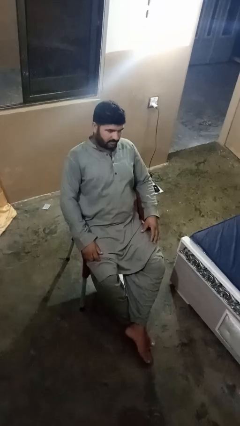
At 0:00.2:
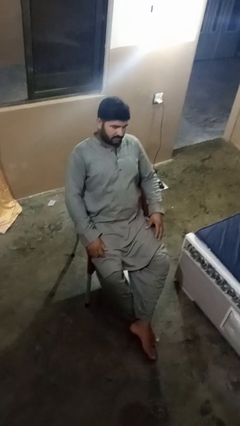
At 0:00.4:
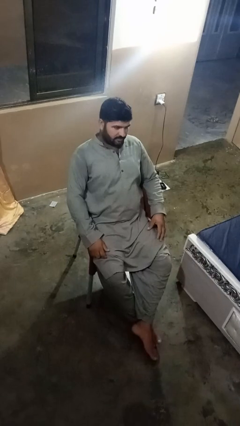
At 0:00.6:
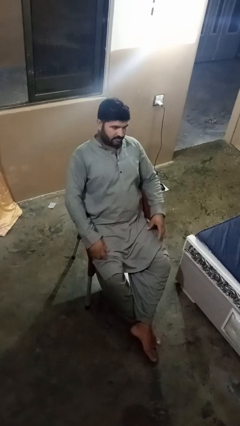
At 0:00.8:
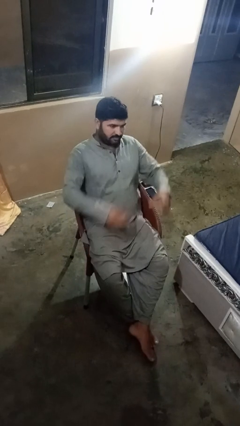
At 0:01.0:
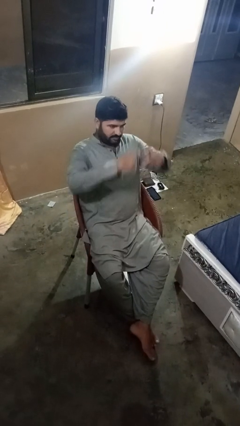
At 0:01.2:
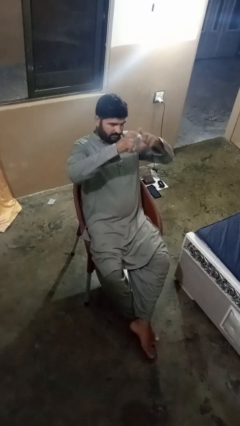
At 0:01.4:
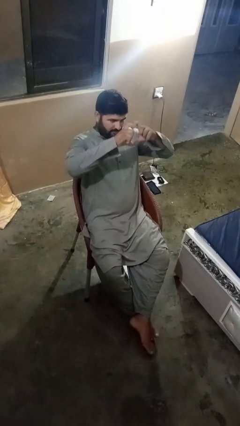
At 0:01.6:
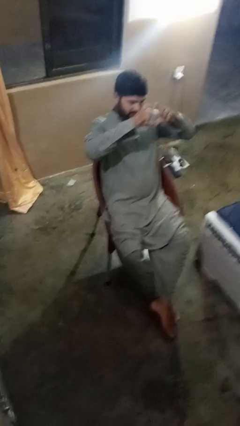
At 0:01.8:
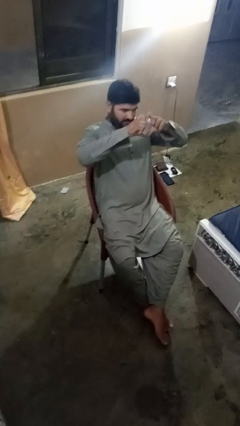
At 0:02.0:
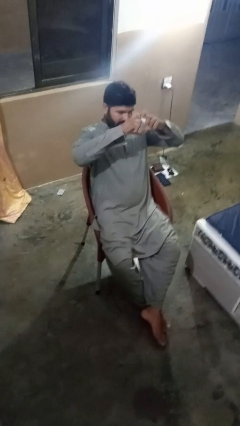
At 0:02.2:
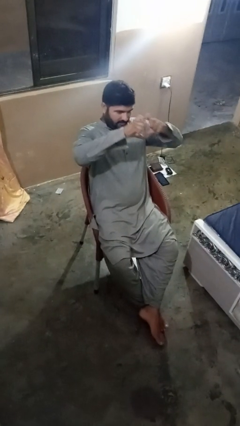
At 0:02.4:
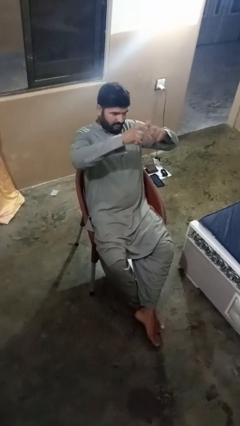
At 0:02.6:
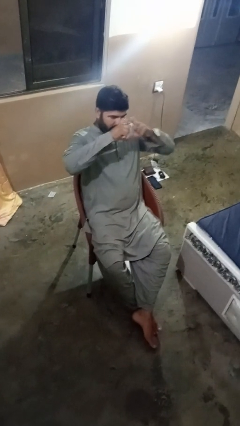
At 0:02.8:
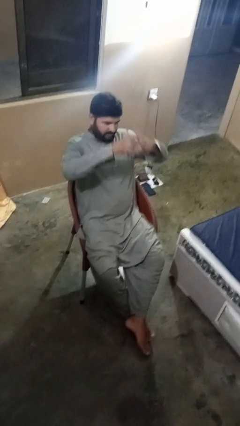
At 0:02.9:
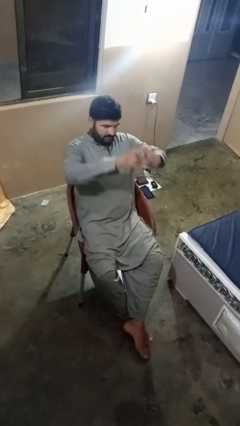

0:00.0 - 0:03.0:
person gestures heart

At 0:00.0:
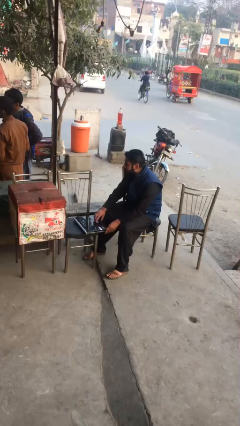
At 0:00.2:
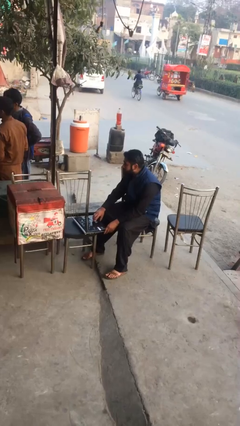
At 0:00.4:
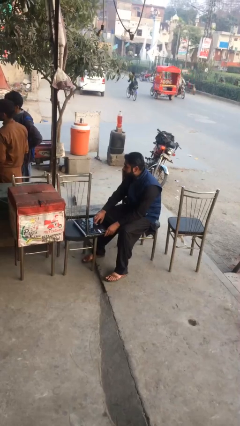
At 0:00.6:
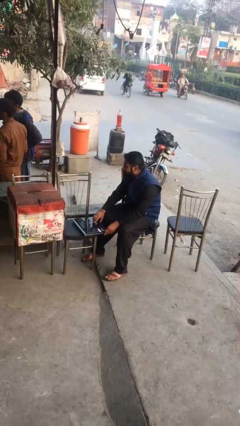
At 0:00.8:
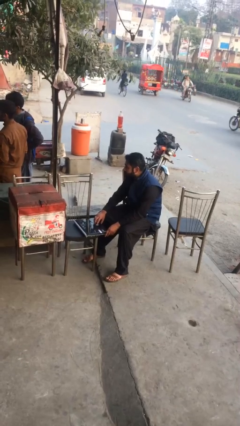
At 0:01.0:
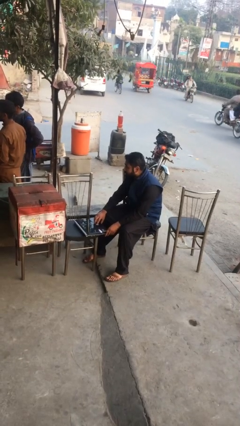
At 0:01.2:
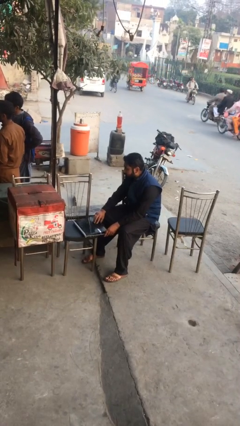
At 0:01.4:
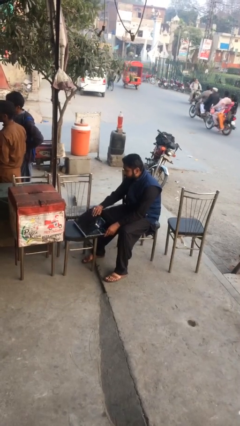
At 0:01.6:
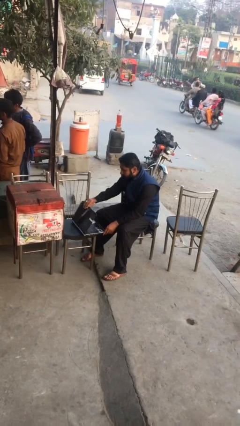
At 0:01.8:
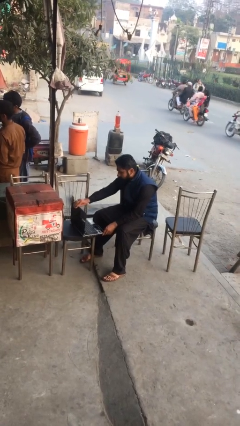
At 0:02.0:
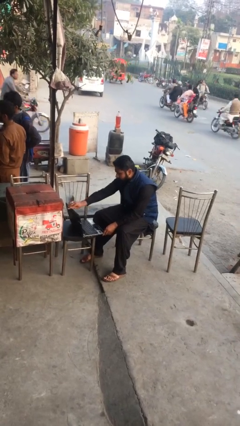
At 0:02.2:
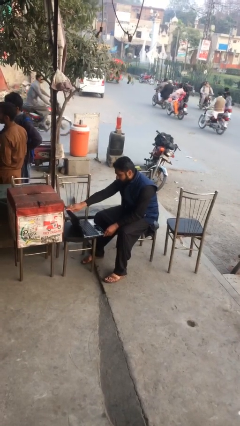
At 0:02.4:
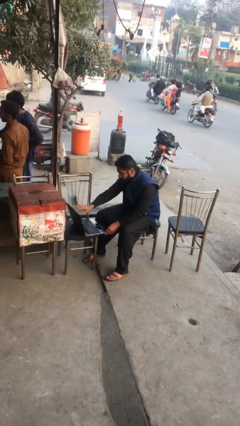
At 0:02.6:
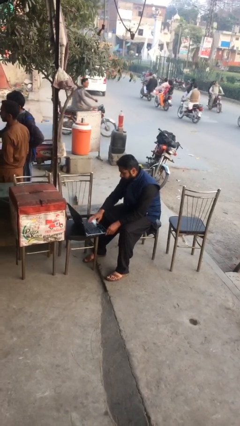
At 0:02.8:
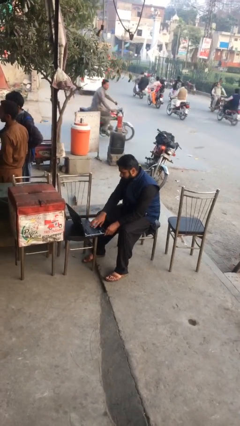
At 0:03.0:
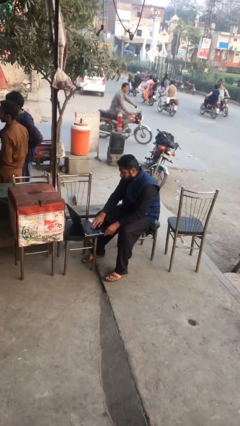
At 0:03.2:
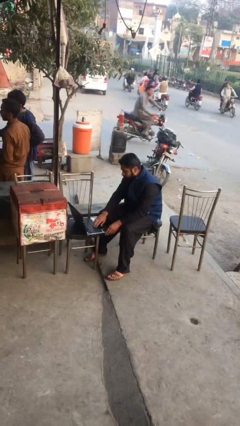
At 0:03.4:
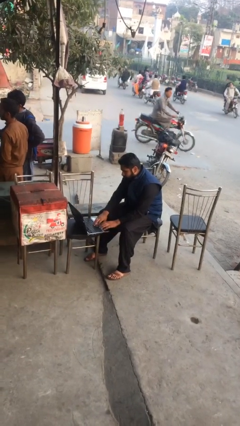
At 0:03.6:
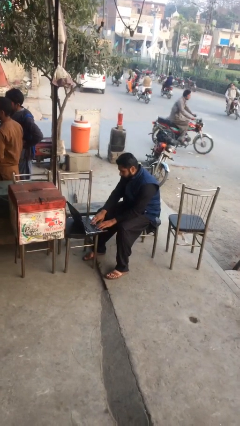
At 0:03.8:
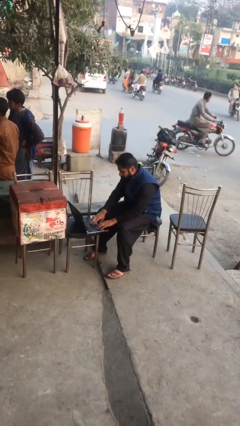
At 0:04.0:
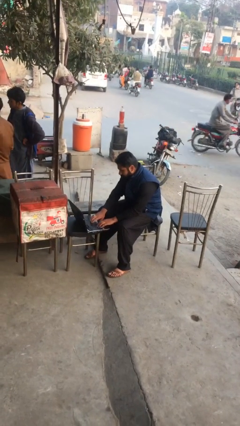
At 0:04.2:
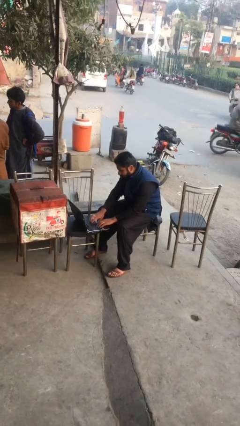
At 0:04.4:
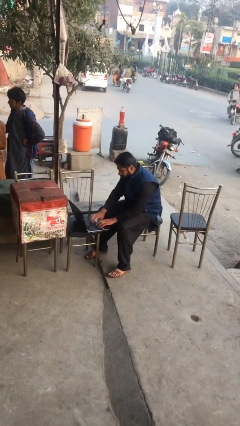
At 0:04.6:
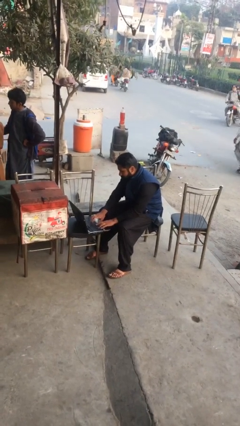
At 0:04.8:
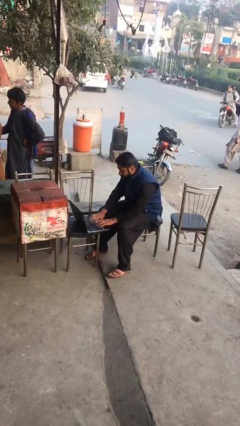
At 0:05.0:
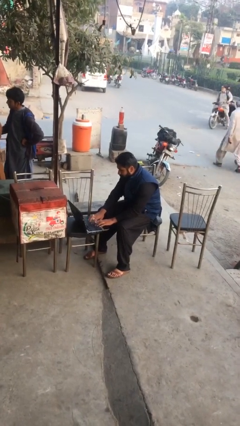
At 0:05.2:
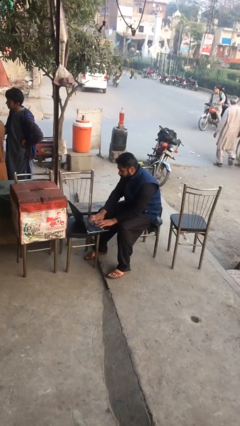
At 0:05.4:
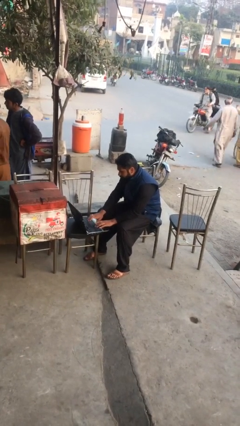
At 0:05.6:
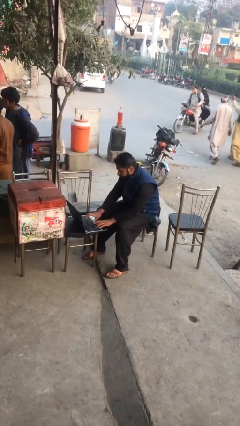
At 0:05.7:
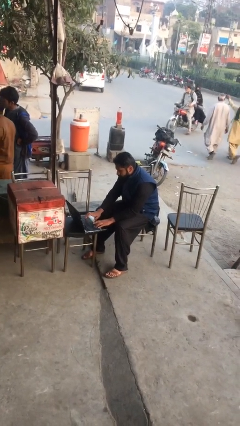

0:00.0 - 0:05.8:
person interacts with laptop

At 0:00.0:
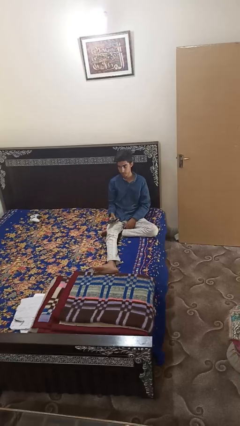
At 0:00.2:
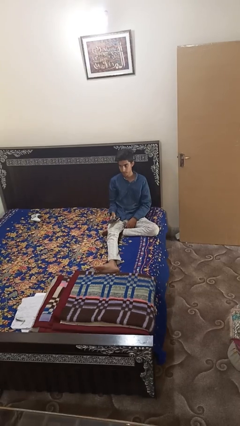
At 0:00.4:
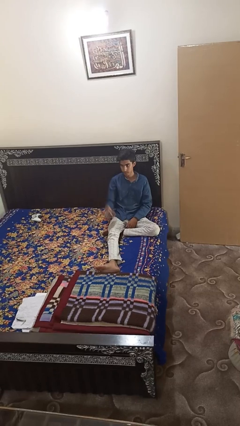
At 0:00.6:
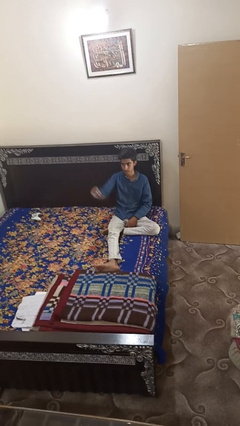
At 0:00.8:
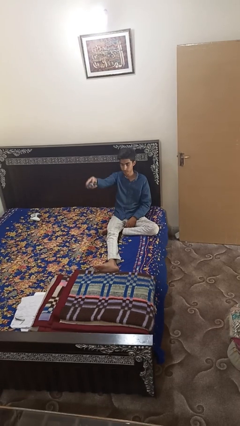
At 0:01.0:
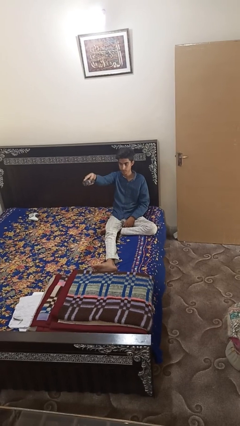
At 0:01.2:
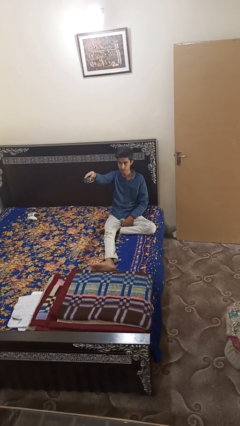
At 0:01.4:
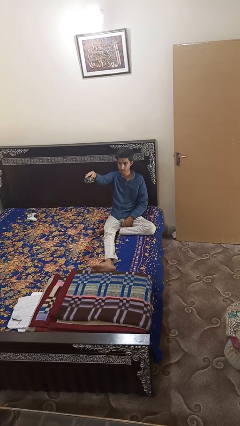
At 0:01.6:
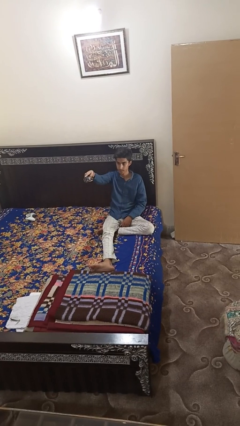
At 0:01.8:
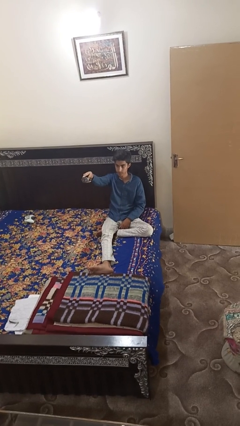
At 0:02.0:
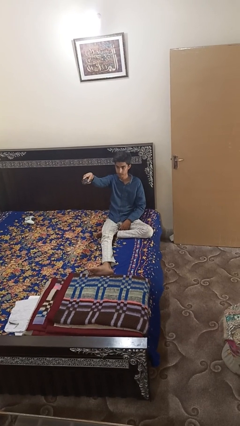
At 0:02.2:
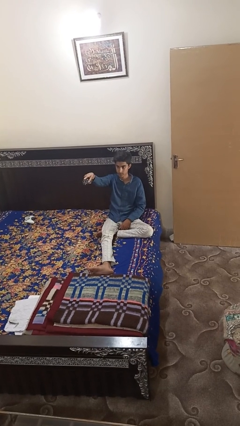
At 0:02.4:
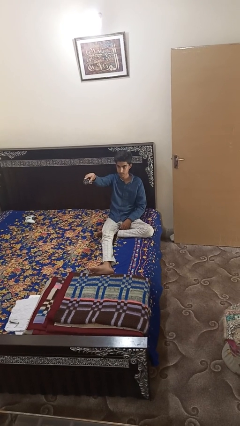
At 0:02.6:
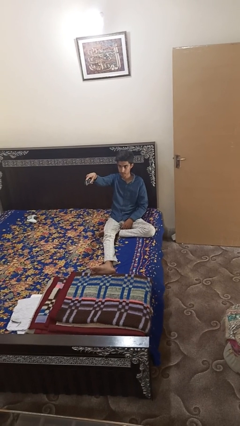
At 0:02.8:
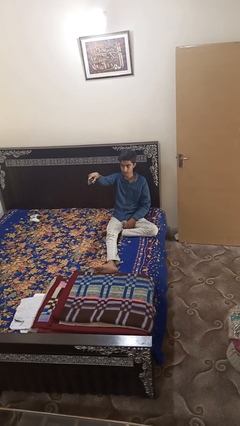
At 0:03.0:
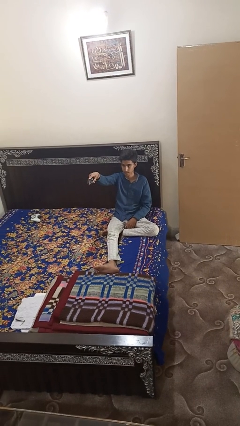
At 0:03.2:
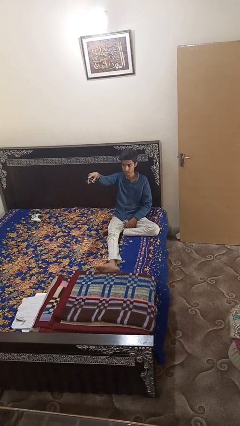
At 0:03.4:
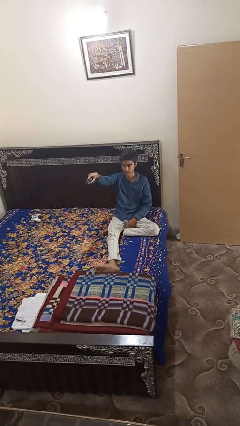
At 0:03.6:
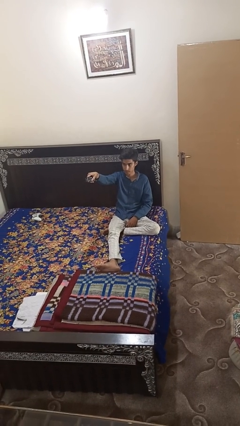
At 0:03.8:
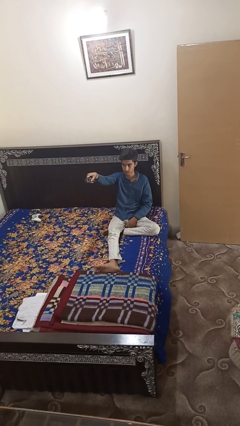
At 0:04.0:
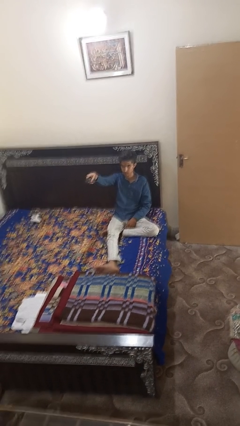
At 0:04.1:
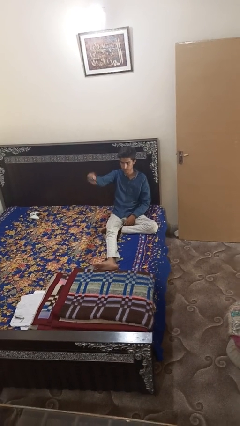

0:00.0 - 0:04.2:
person uses television remote

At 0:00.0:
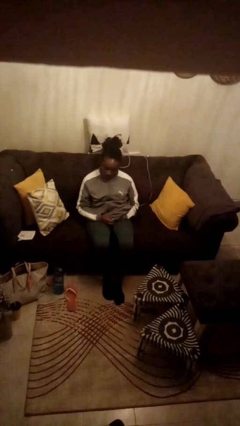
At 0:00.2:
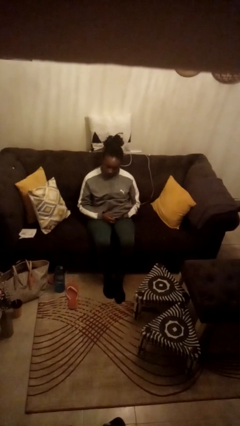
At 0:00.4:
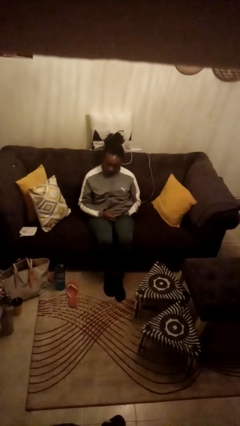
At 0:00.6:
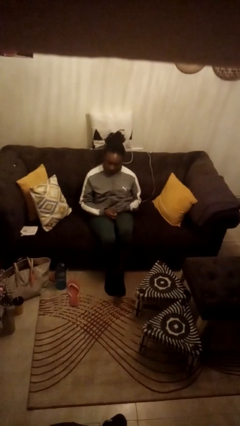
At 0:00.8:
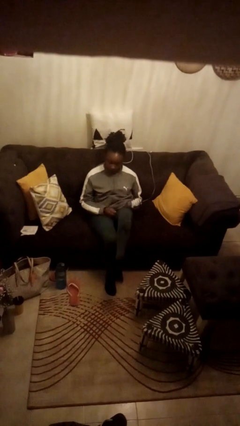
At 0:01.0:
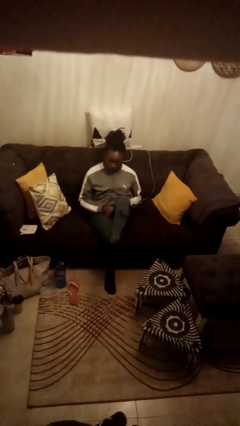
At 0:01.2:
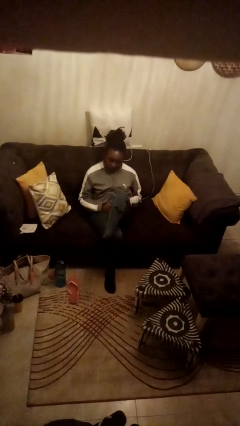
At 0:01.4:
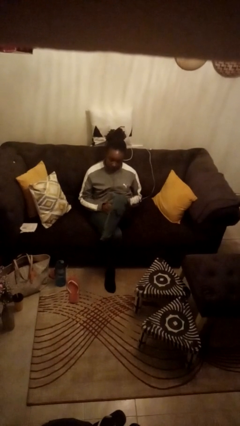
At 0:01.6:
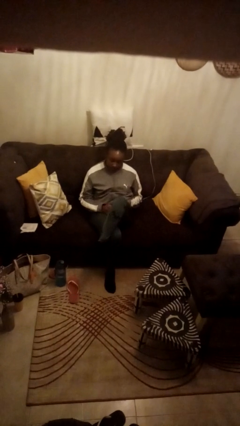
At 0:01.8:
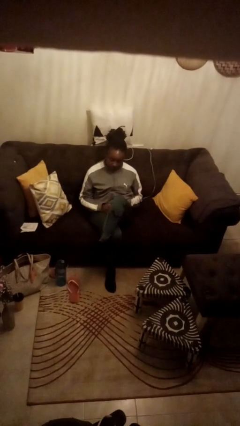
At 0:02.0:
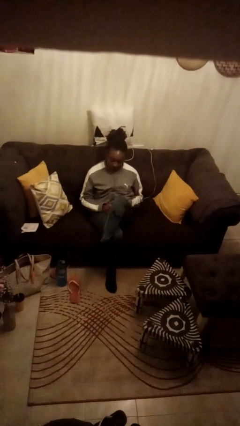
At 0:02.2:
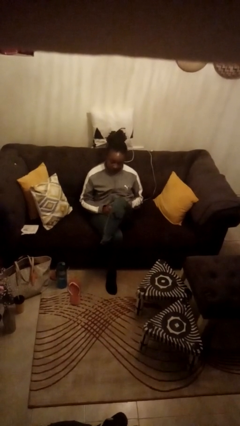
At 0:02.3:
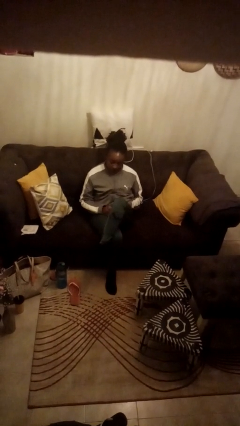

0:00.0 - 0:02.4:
person crosses legs

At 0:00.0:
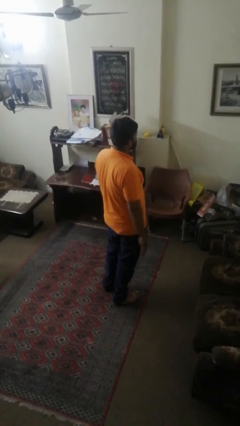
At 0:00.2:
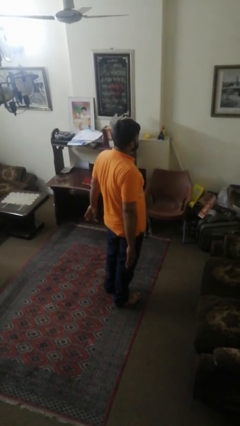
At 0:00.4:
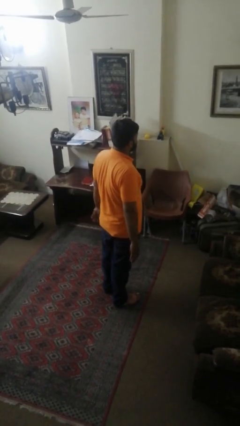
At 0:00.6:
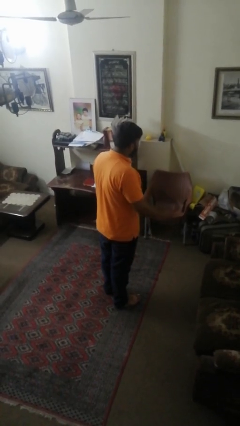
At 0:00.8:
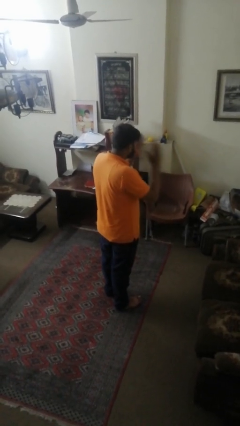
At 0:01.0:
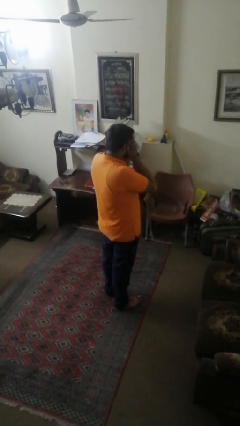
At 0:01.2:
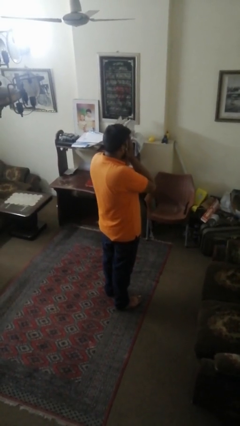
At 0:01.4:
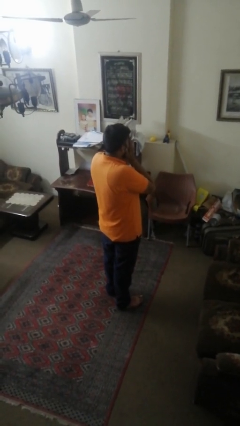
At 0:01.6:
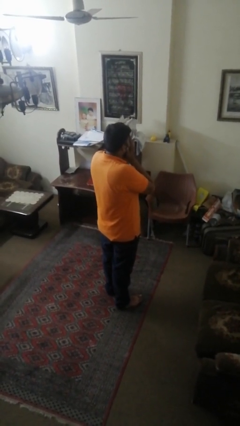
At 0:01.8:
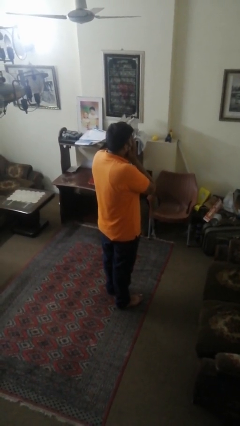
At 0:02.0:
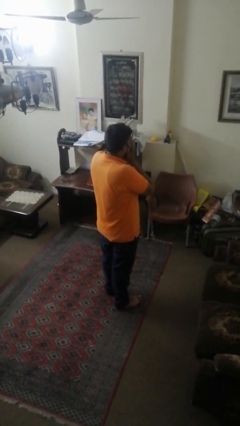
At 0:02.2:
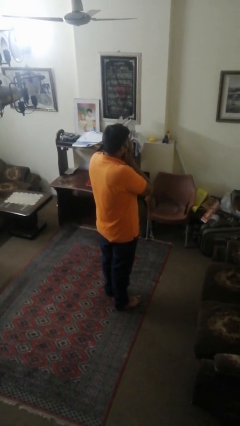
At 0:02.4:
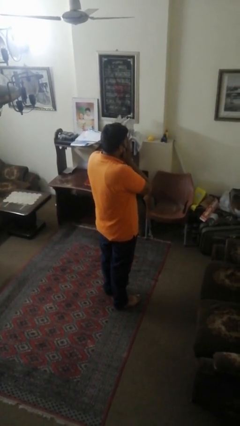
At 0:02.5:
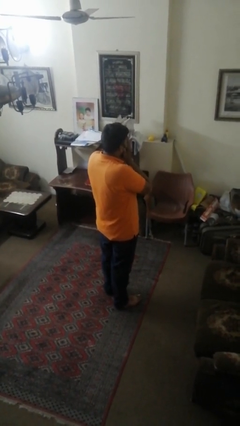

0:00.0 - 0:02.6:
person covers face with hands
